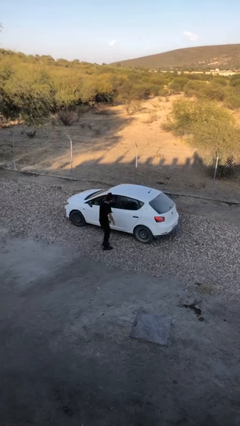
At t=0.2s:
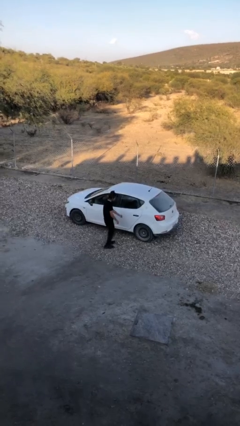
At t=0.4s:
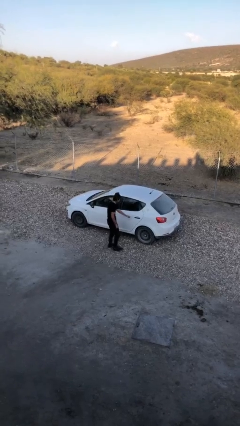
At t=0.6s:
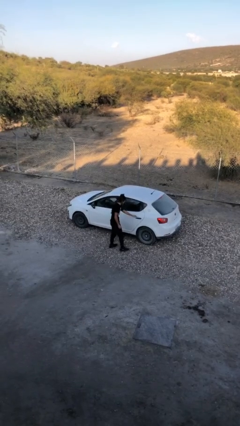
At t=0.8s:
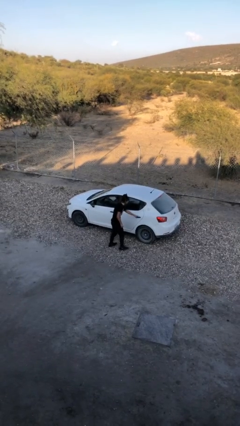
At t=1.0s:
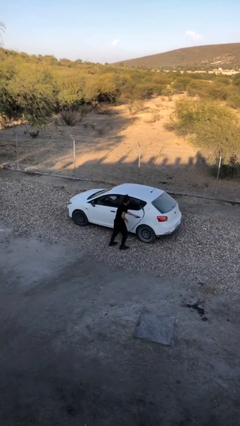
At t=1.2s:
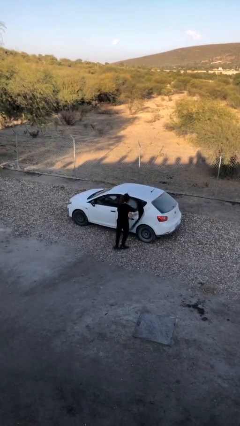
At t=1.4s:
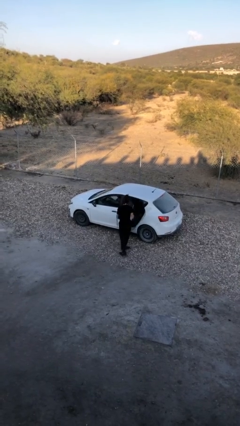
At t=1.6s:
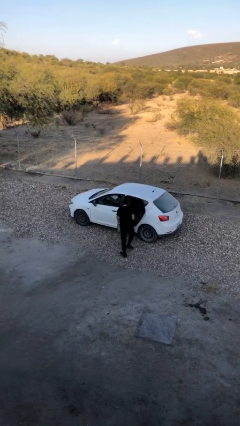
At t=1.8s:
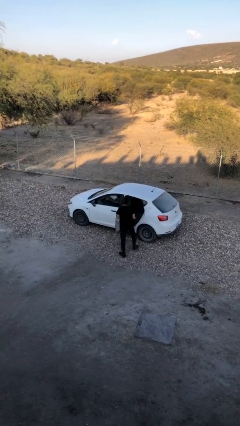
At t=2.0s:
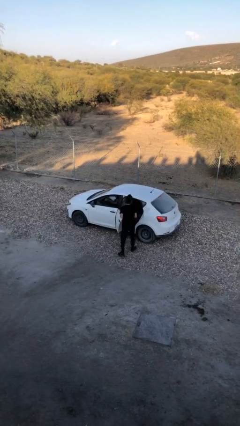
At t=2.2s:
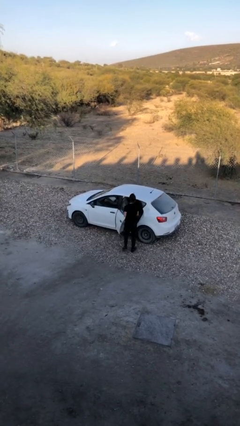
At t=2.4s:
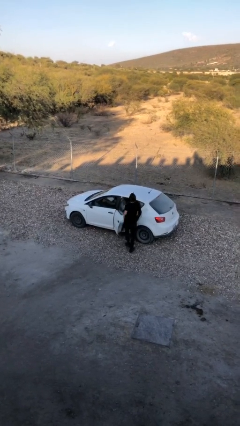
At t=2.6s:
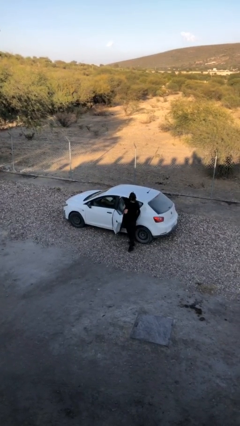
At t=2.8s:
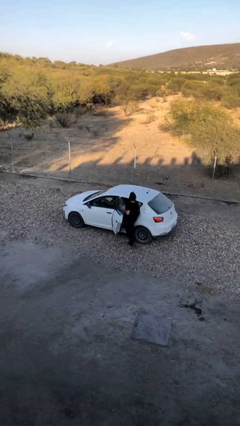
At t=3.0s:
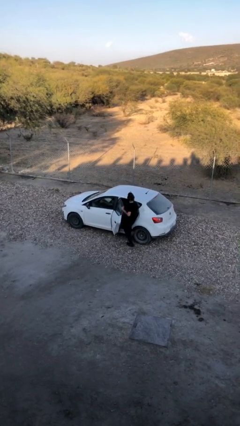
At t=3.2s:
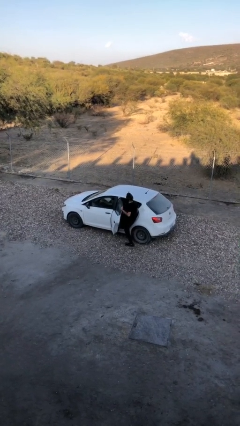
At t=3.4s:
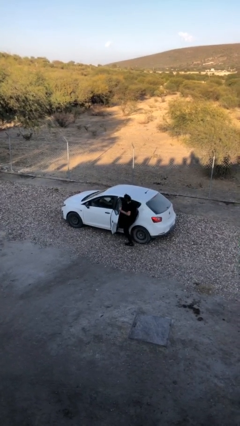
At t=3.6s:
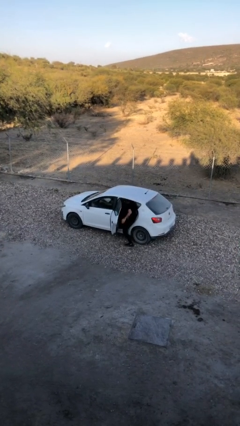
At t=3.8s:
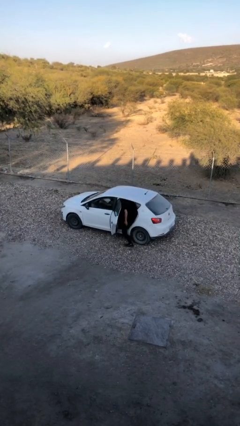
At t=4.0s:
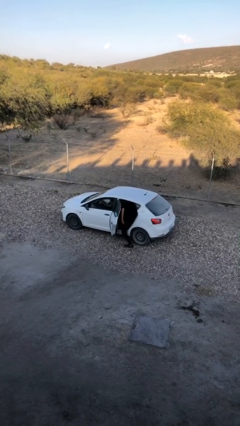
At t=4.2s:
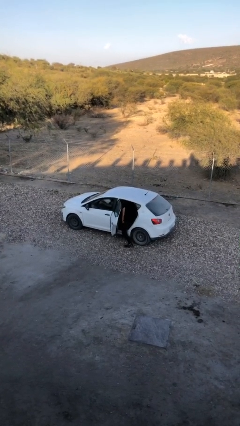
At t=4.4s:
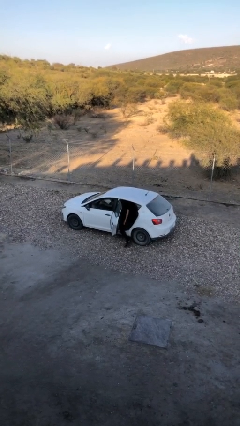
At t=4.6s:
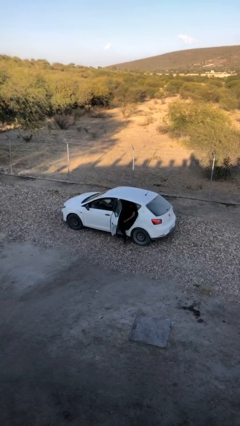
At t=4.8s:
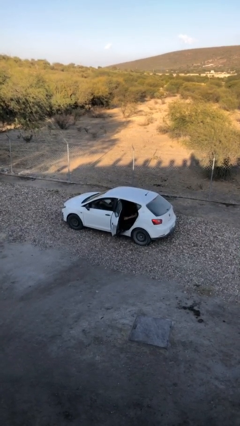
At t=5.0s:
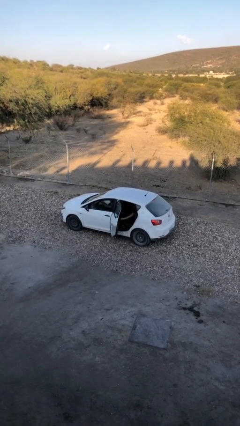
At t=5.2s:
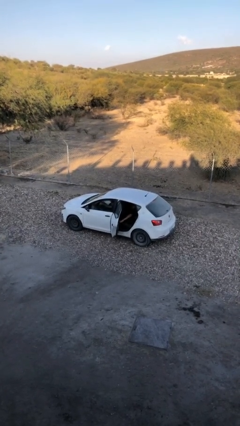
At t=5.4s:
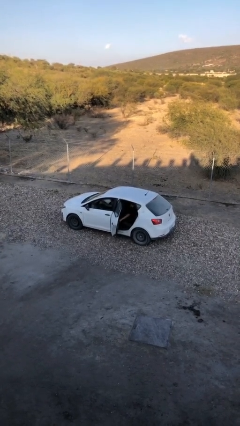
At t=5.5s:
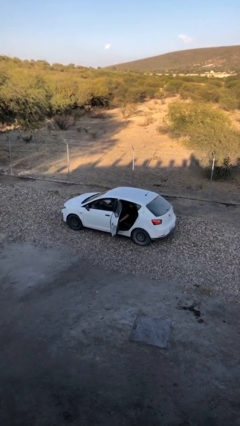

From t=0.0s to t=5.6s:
car picks up person

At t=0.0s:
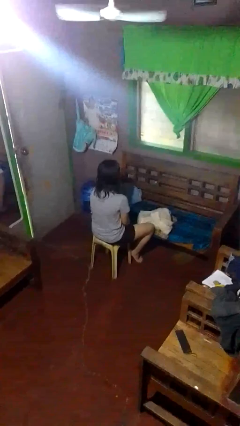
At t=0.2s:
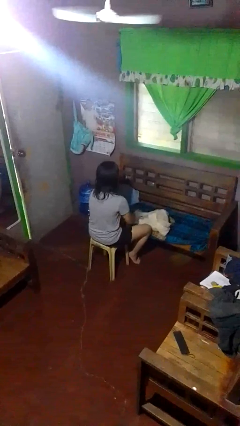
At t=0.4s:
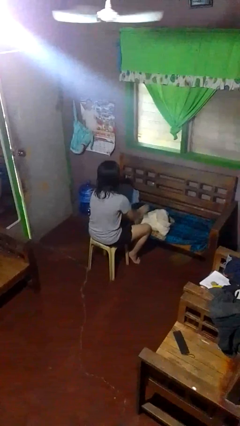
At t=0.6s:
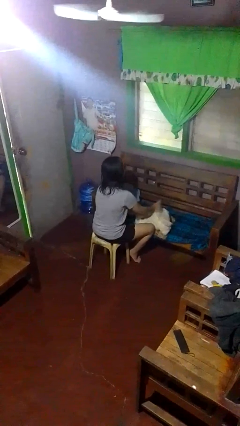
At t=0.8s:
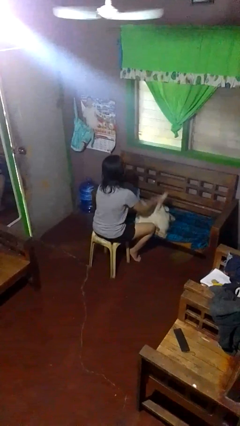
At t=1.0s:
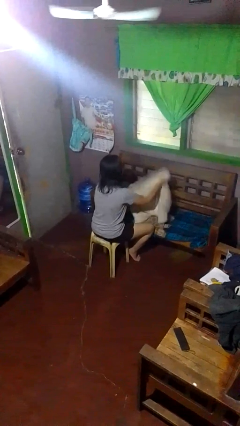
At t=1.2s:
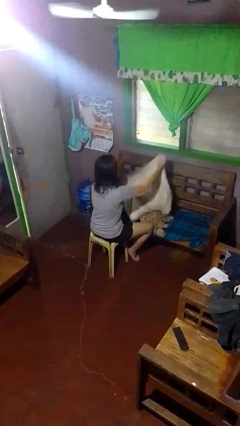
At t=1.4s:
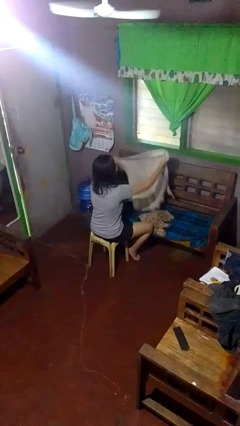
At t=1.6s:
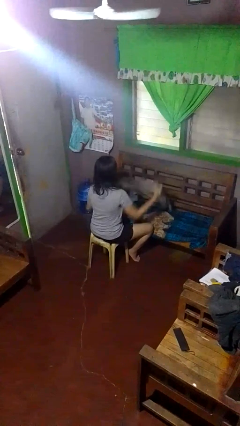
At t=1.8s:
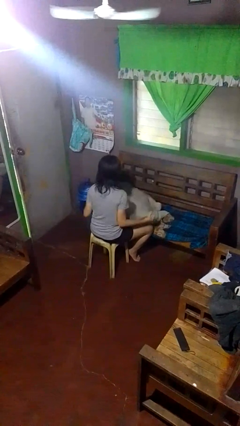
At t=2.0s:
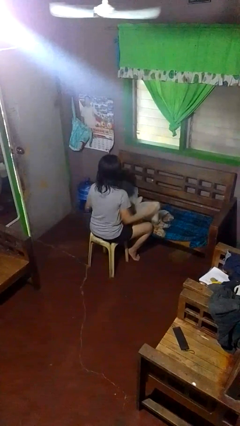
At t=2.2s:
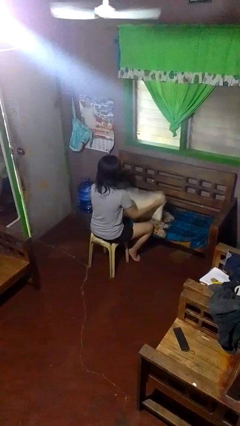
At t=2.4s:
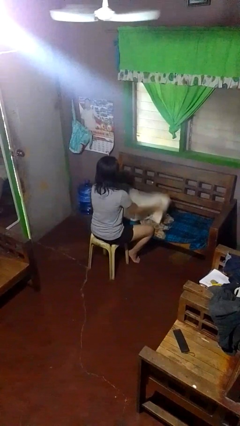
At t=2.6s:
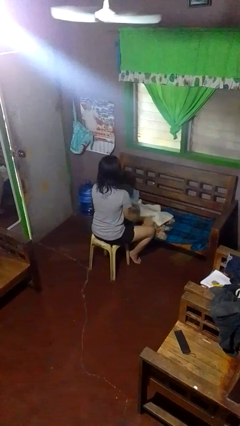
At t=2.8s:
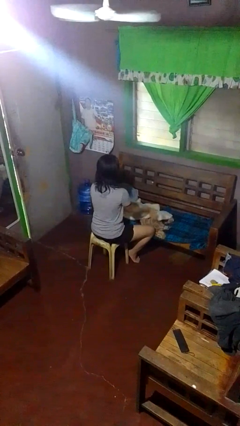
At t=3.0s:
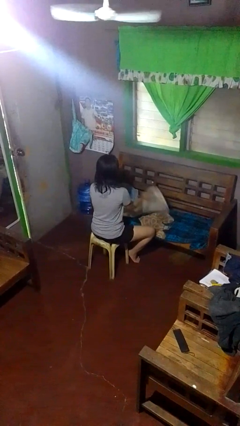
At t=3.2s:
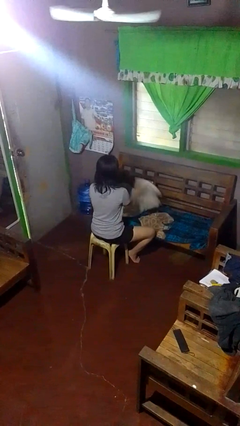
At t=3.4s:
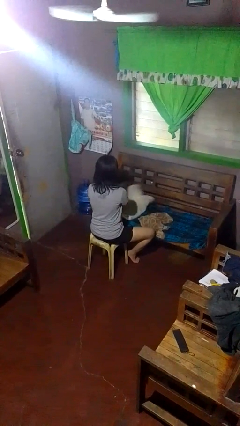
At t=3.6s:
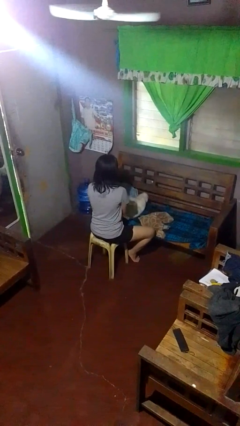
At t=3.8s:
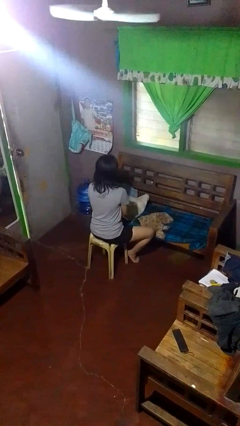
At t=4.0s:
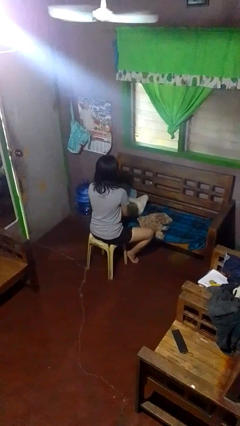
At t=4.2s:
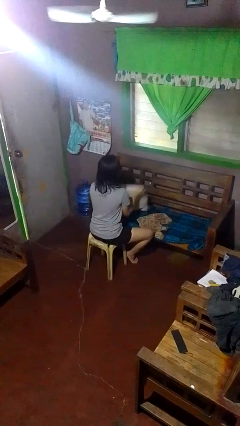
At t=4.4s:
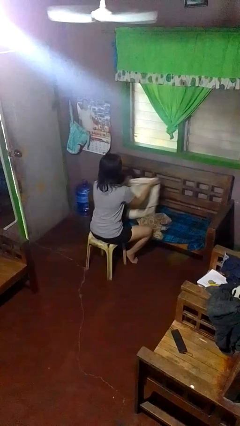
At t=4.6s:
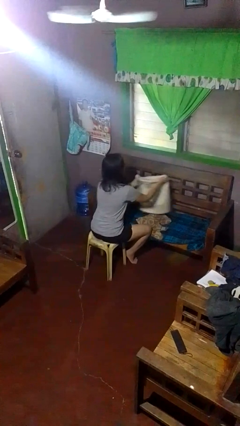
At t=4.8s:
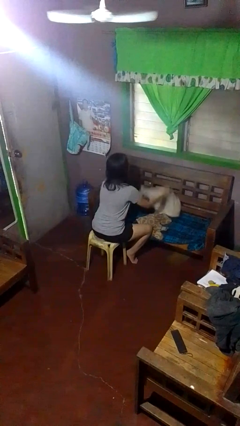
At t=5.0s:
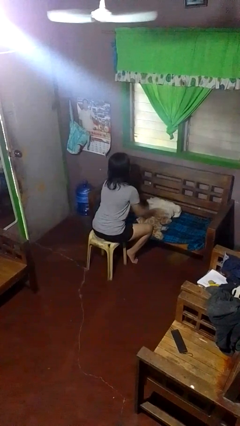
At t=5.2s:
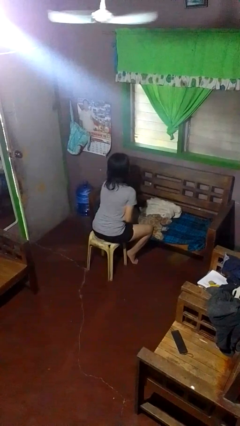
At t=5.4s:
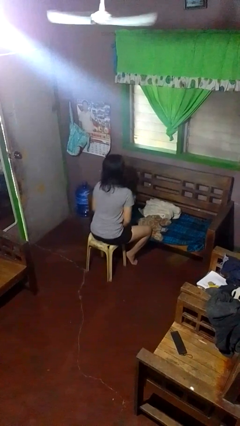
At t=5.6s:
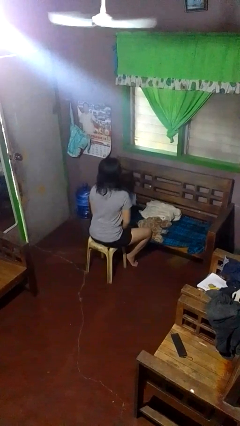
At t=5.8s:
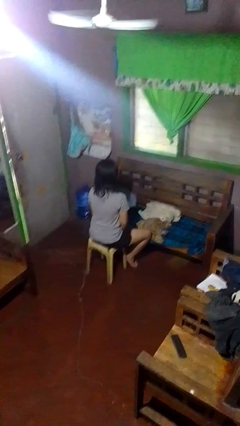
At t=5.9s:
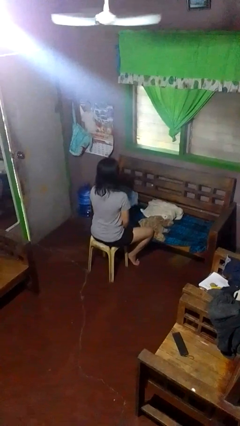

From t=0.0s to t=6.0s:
person folds towel

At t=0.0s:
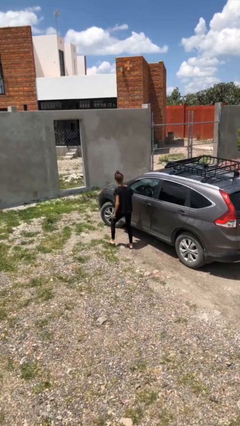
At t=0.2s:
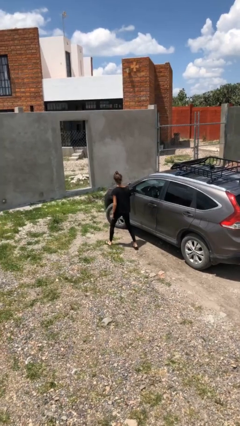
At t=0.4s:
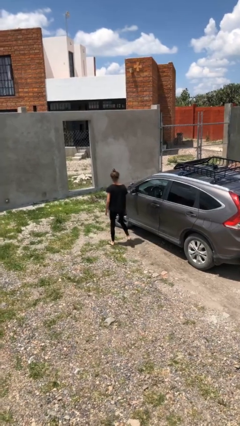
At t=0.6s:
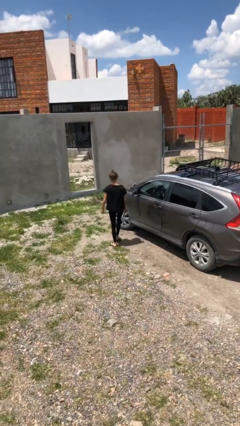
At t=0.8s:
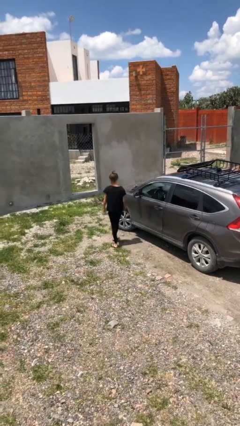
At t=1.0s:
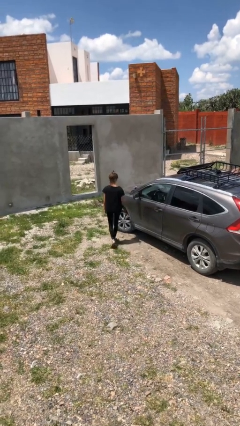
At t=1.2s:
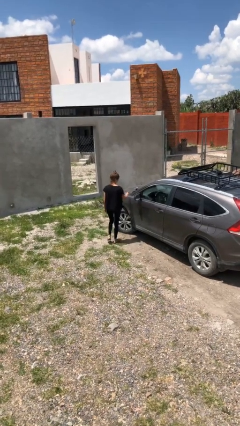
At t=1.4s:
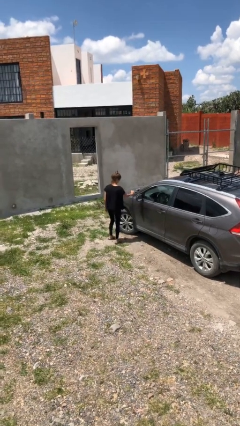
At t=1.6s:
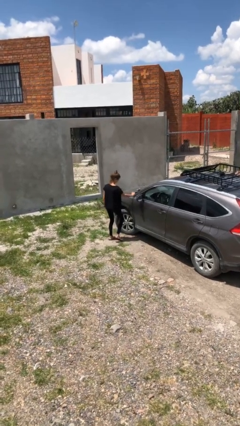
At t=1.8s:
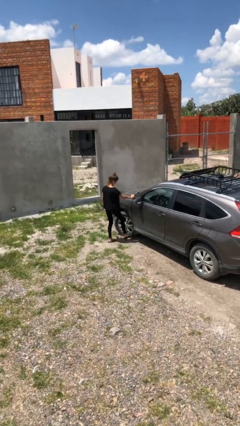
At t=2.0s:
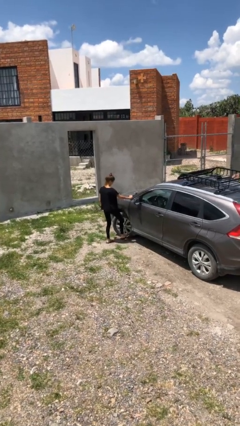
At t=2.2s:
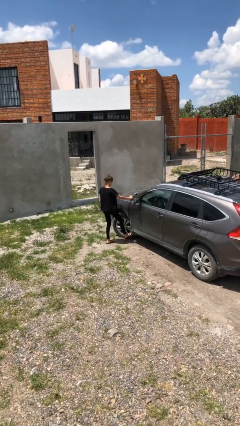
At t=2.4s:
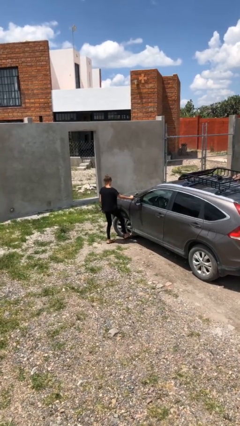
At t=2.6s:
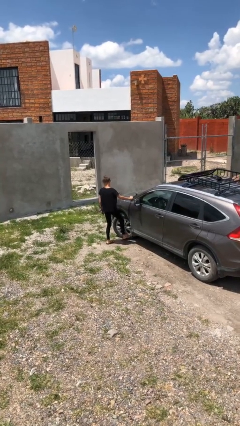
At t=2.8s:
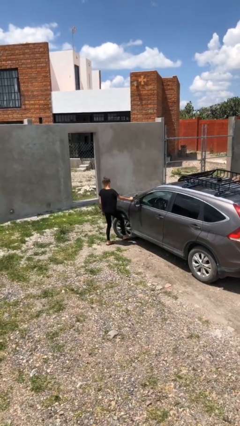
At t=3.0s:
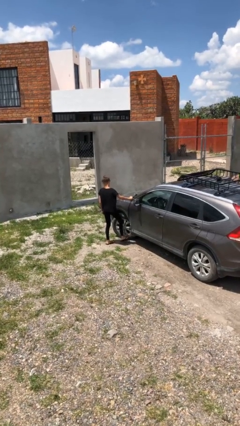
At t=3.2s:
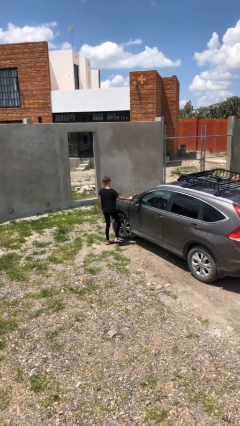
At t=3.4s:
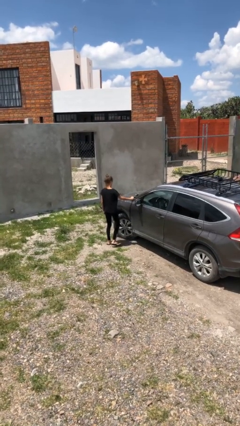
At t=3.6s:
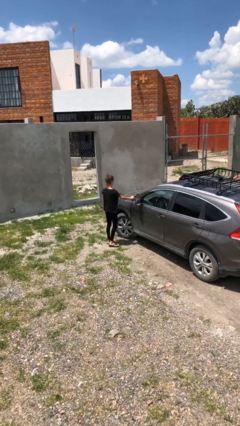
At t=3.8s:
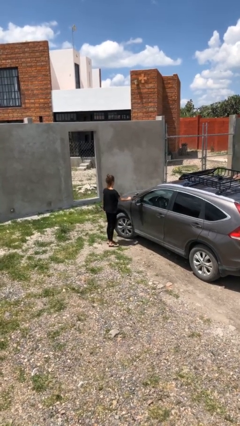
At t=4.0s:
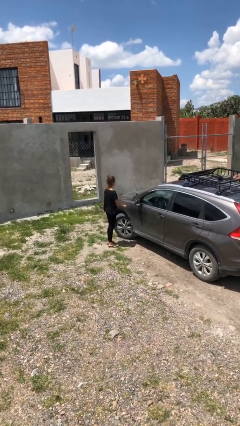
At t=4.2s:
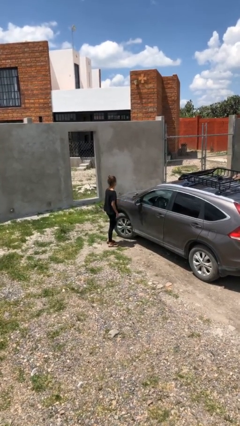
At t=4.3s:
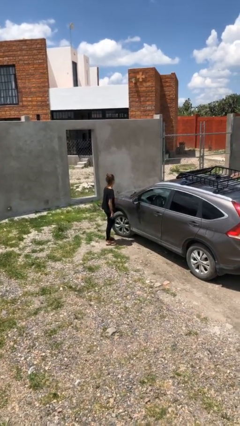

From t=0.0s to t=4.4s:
person kicks car tires

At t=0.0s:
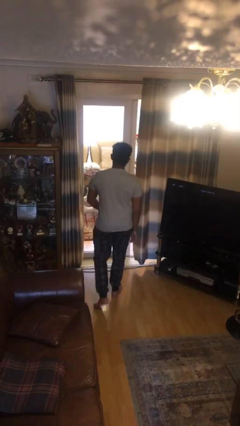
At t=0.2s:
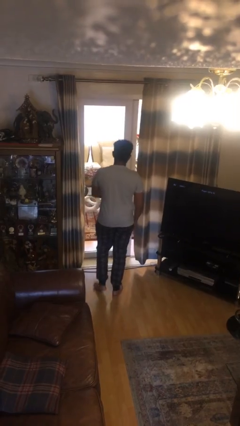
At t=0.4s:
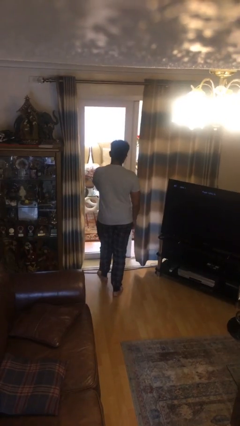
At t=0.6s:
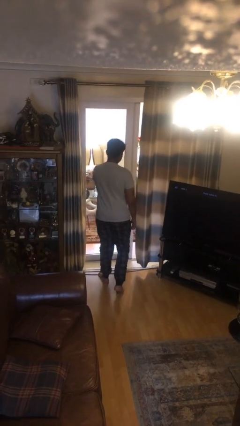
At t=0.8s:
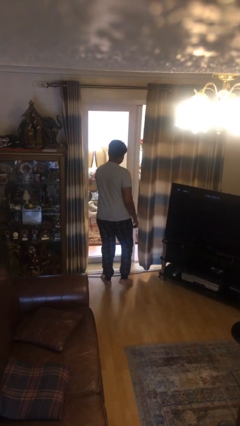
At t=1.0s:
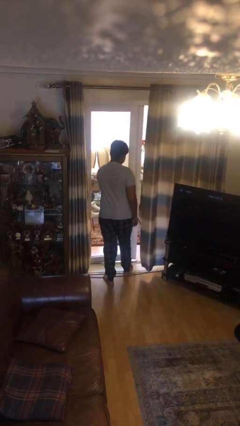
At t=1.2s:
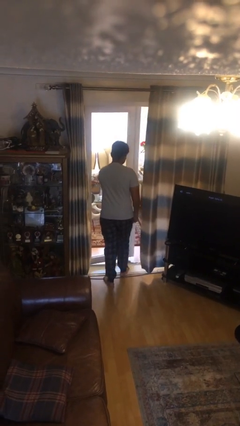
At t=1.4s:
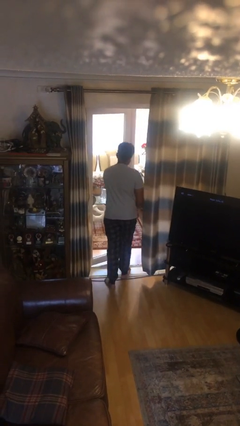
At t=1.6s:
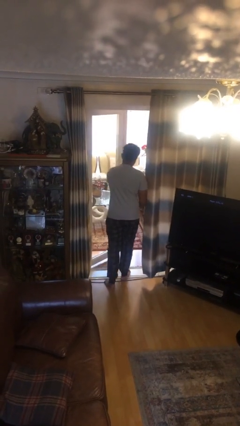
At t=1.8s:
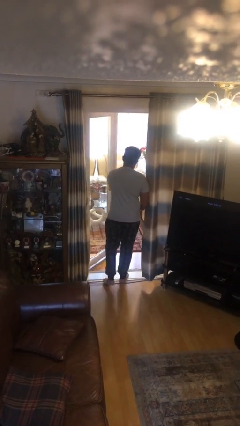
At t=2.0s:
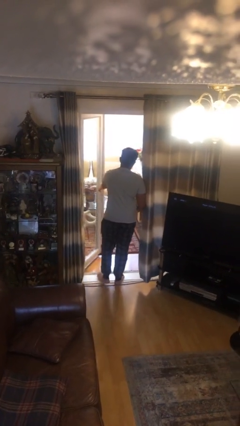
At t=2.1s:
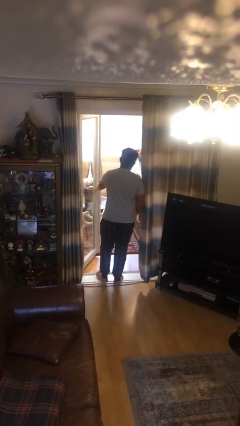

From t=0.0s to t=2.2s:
person opens facility door
